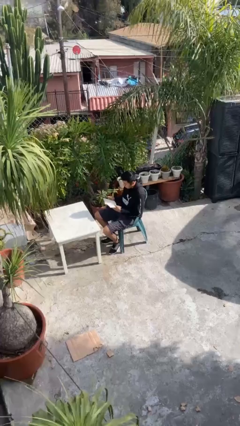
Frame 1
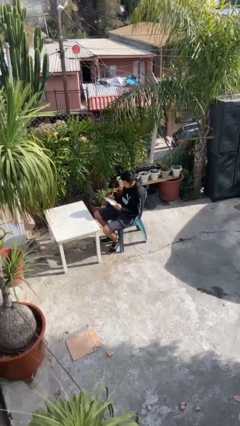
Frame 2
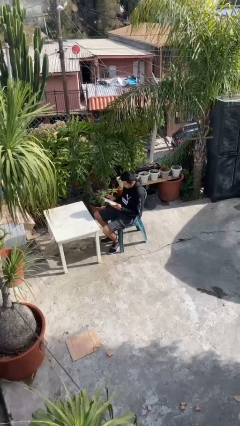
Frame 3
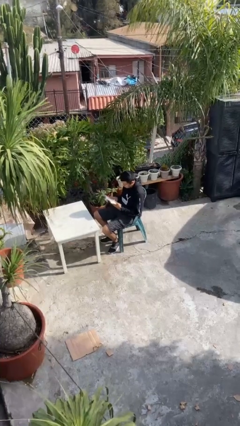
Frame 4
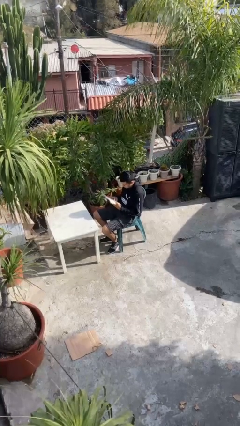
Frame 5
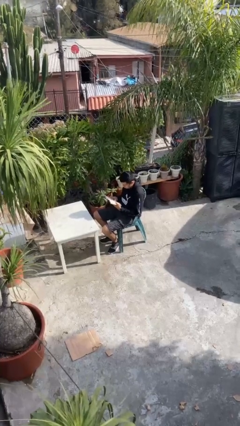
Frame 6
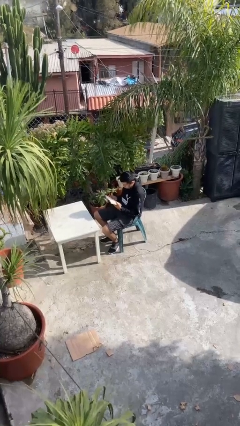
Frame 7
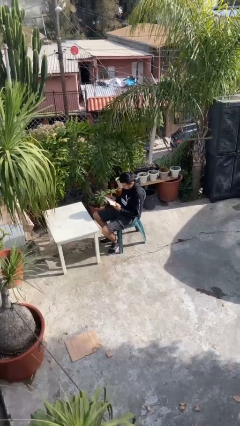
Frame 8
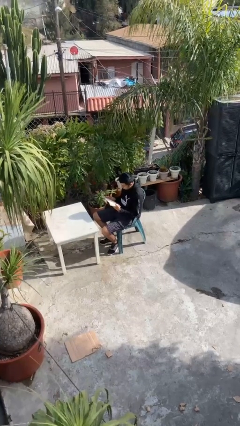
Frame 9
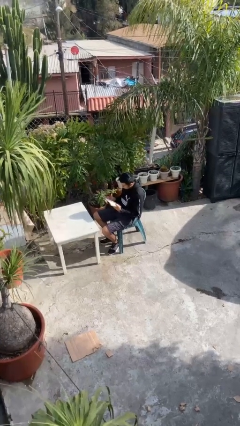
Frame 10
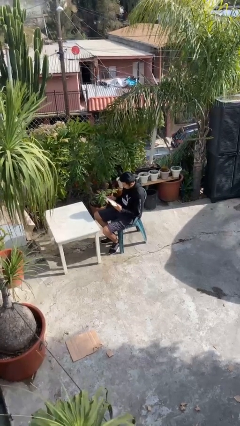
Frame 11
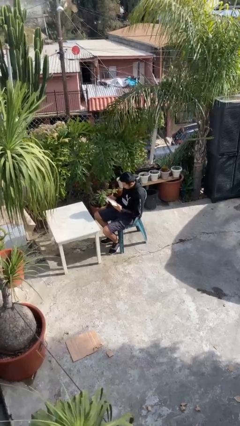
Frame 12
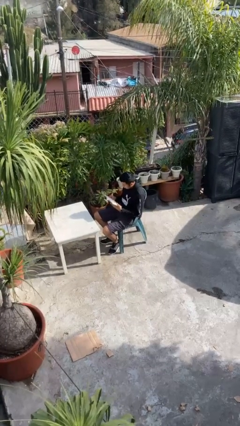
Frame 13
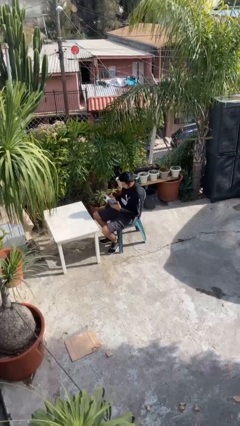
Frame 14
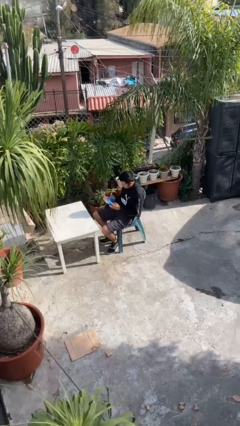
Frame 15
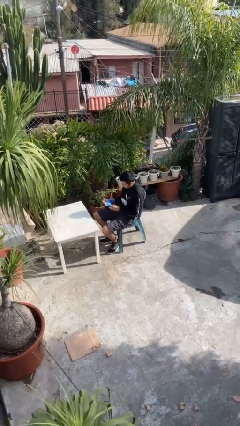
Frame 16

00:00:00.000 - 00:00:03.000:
person reads document

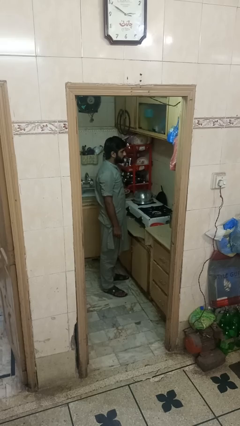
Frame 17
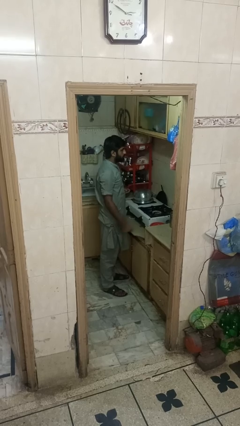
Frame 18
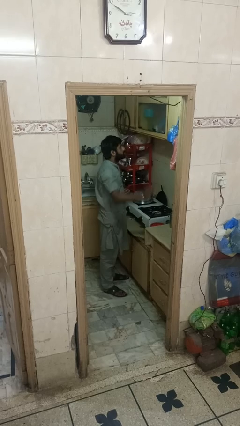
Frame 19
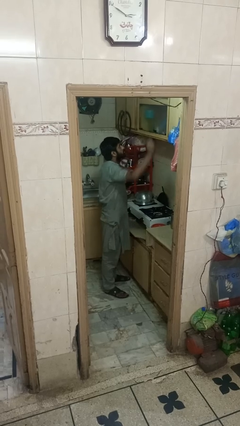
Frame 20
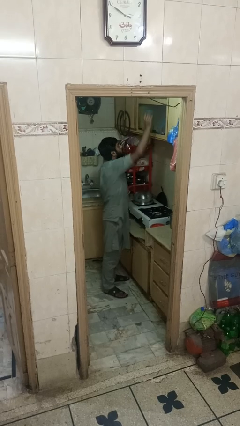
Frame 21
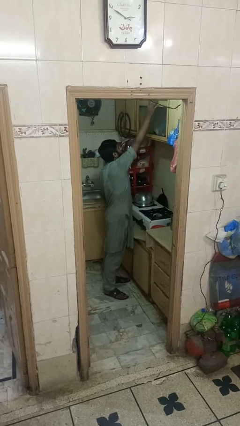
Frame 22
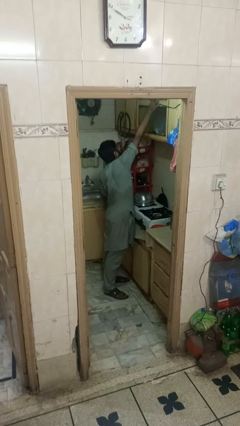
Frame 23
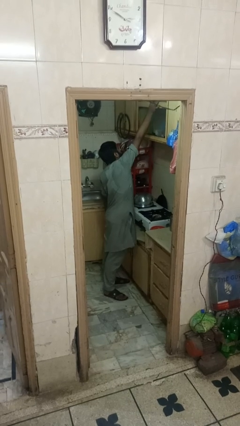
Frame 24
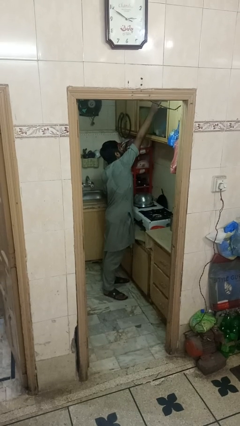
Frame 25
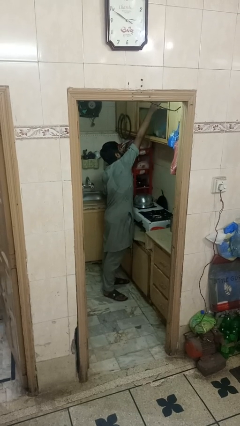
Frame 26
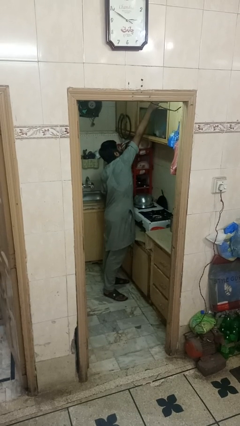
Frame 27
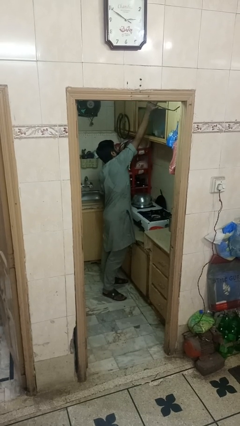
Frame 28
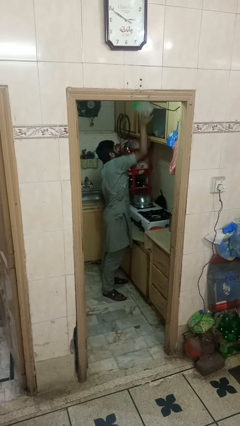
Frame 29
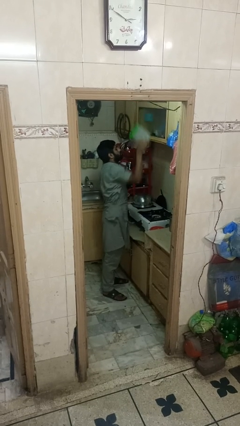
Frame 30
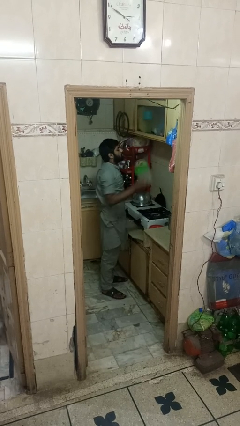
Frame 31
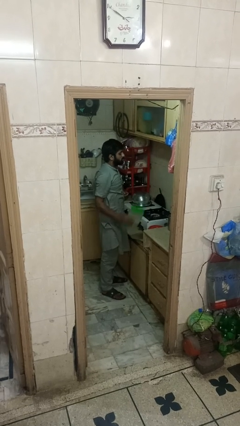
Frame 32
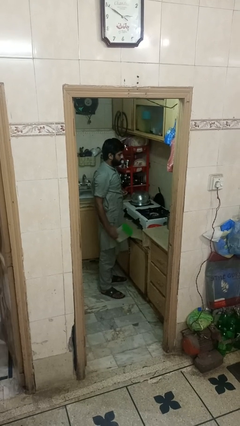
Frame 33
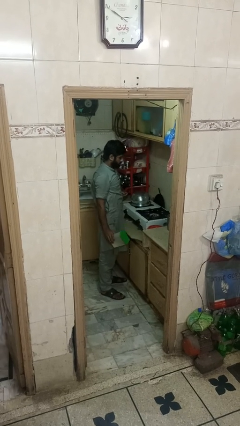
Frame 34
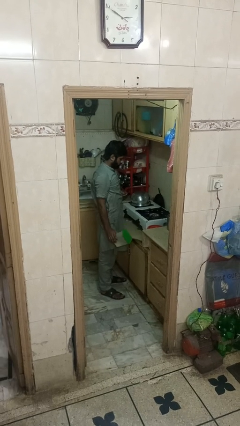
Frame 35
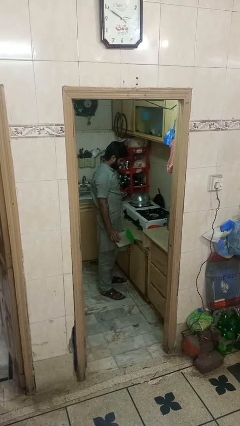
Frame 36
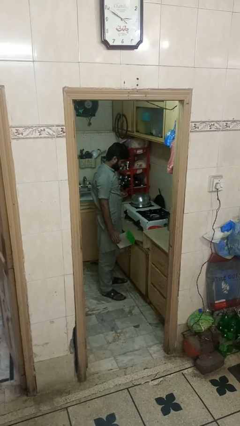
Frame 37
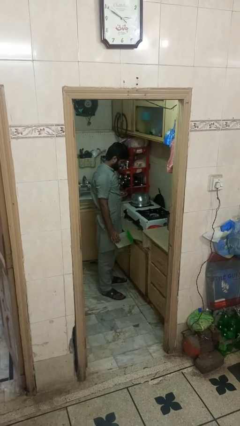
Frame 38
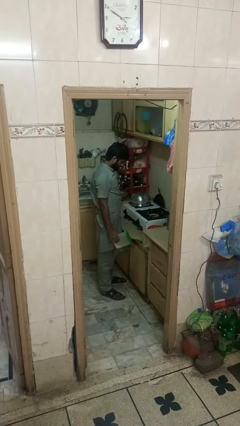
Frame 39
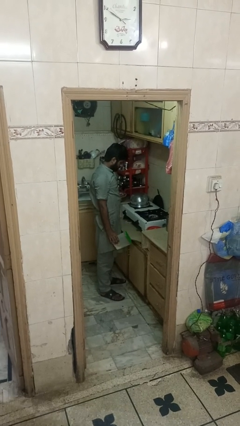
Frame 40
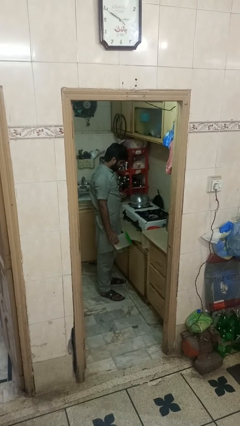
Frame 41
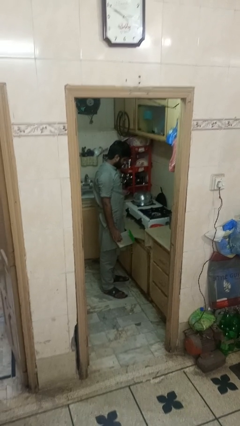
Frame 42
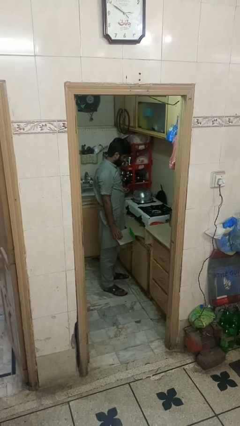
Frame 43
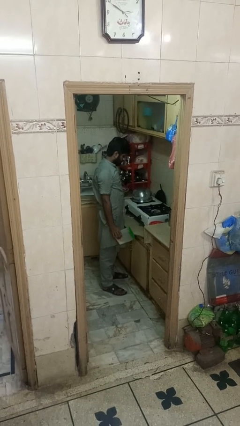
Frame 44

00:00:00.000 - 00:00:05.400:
person picks up object from shelf

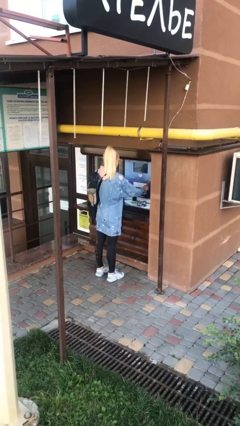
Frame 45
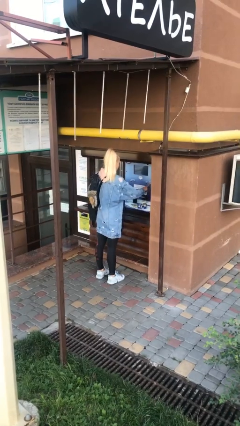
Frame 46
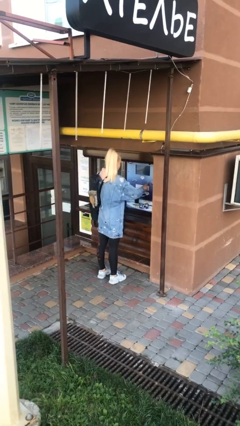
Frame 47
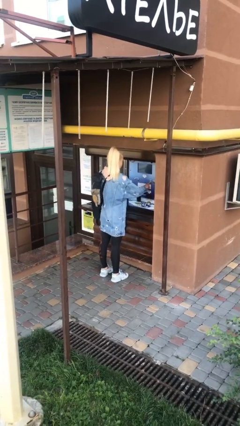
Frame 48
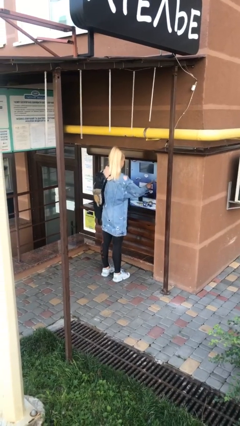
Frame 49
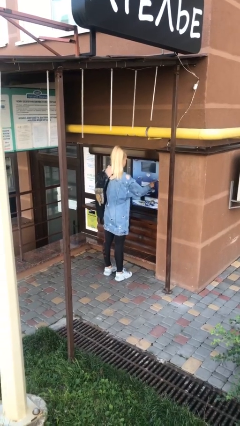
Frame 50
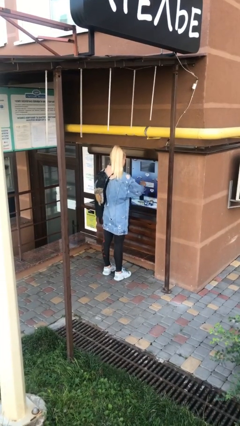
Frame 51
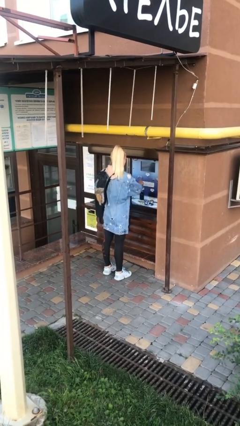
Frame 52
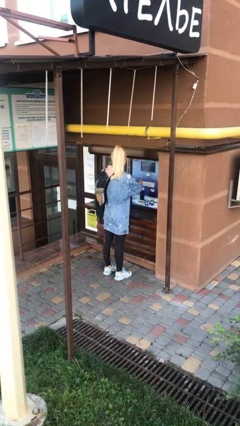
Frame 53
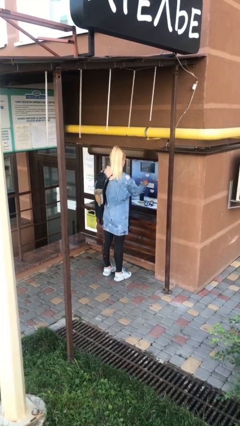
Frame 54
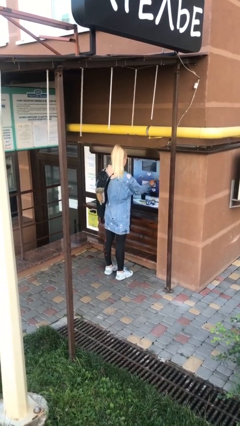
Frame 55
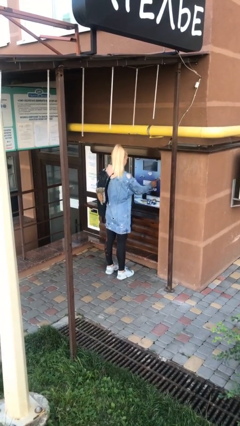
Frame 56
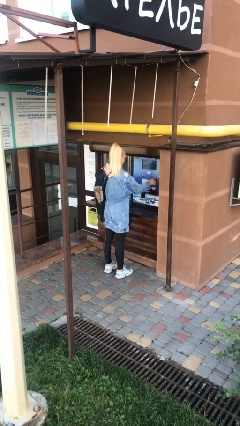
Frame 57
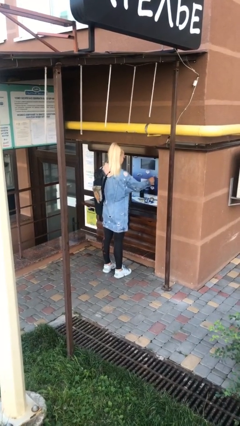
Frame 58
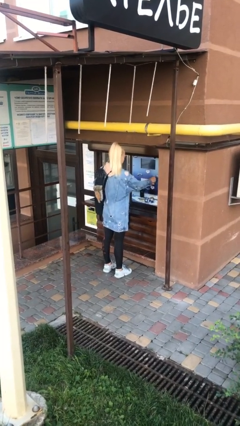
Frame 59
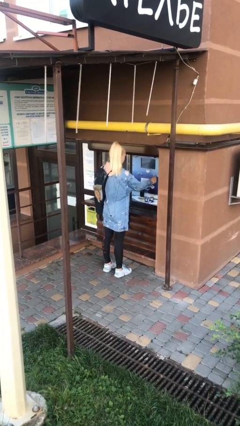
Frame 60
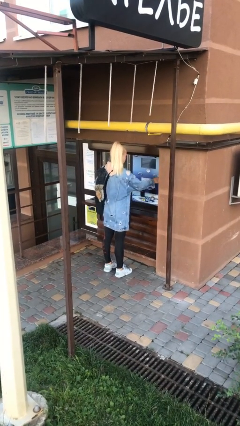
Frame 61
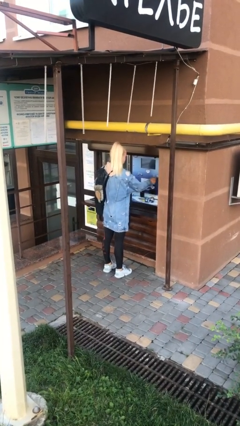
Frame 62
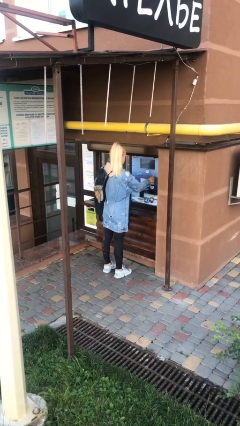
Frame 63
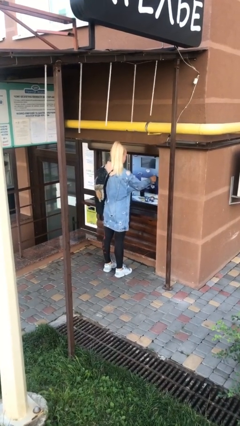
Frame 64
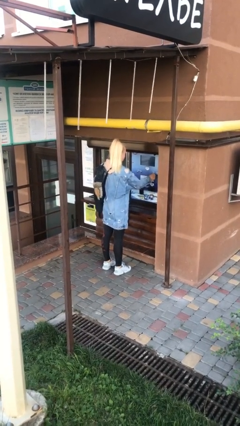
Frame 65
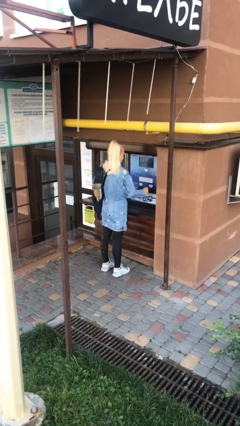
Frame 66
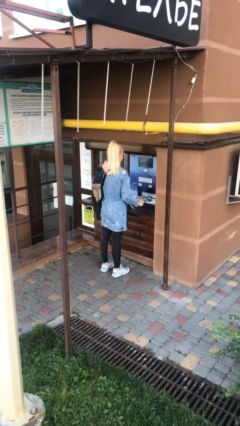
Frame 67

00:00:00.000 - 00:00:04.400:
person purchases from machine

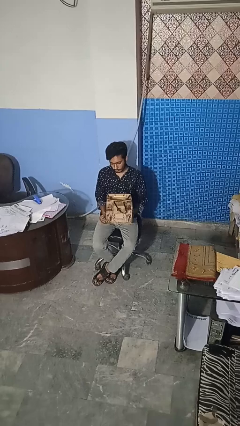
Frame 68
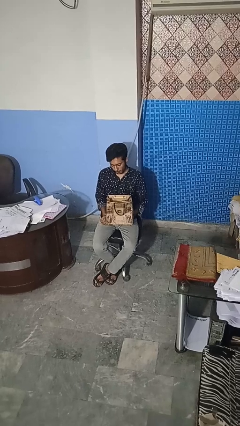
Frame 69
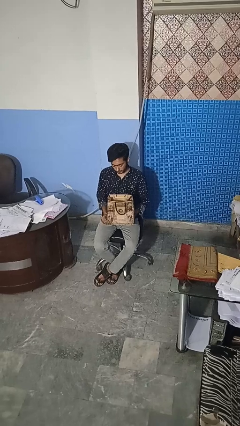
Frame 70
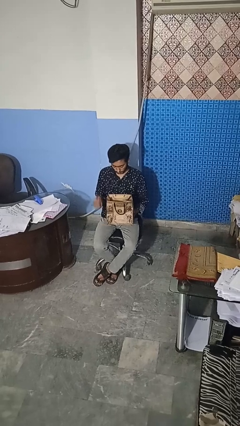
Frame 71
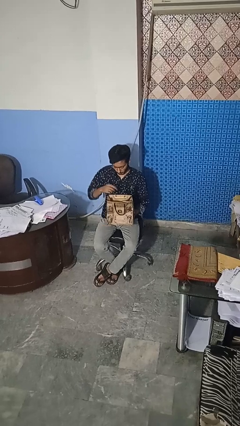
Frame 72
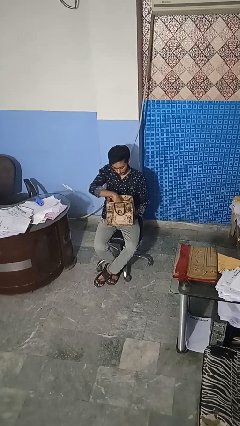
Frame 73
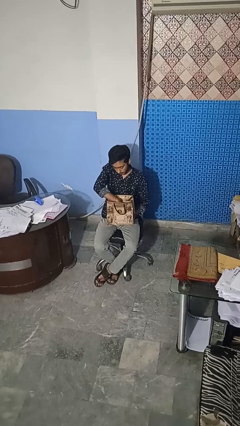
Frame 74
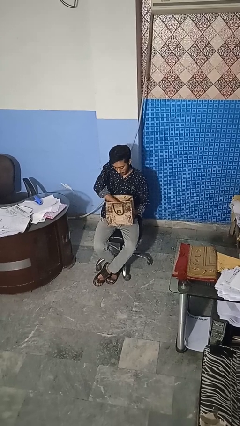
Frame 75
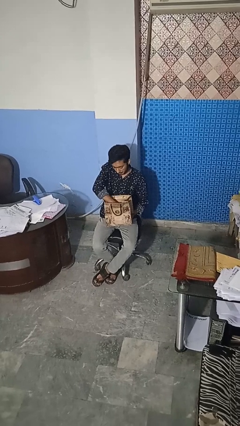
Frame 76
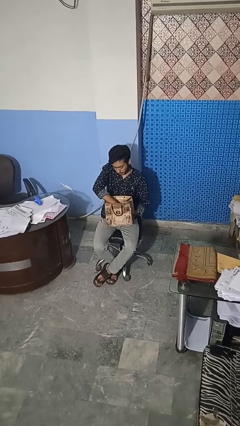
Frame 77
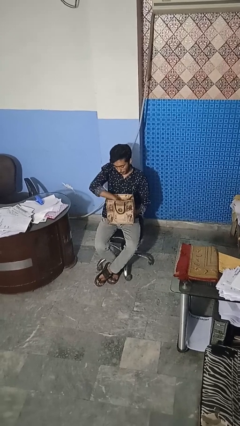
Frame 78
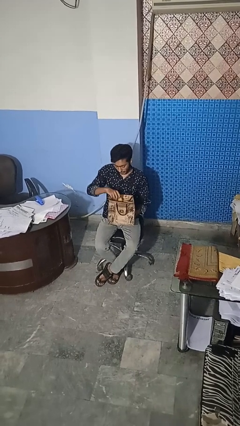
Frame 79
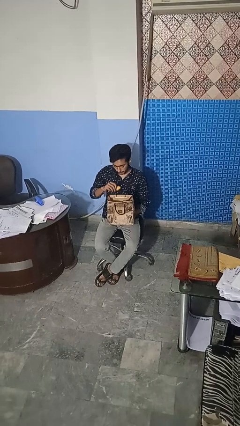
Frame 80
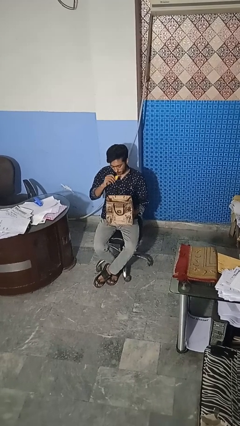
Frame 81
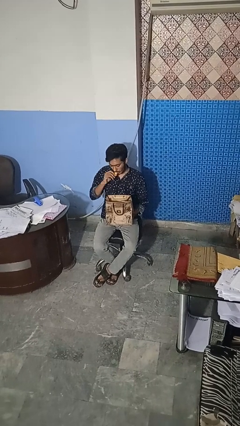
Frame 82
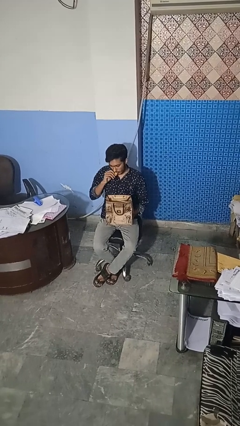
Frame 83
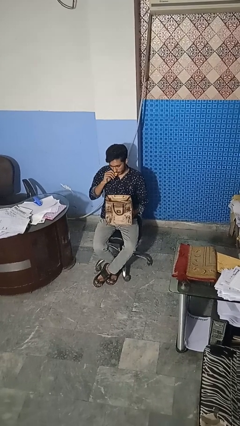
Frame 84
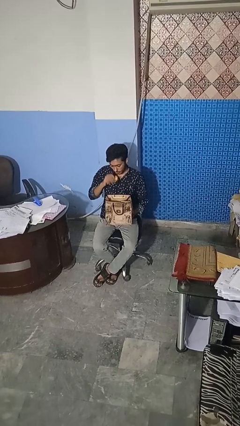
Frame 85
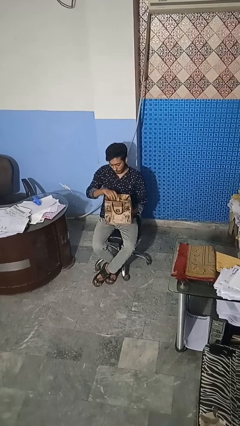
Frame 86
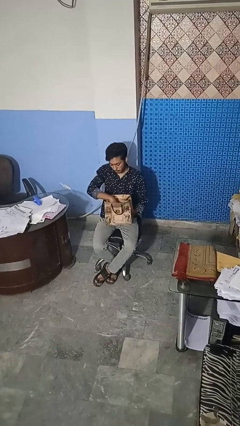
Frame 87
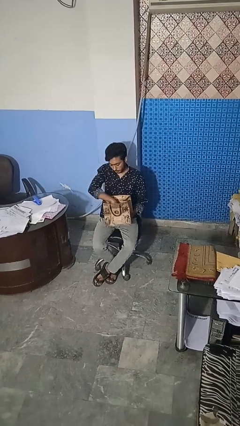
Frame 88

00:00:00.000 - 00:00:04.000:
person eats snack from bag

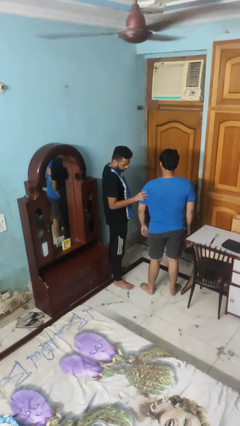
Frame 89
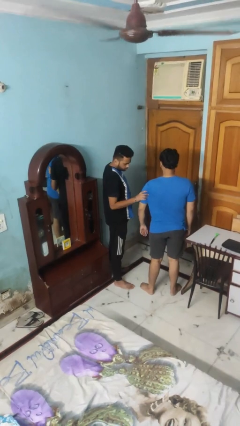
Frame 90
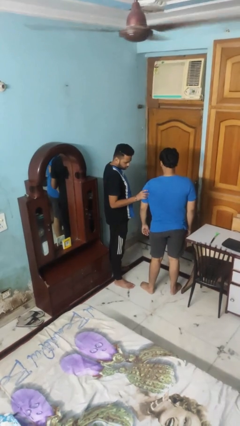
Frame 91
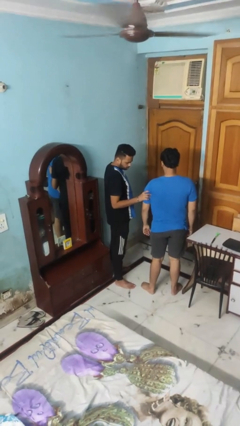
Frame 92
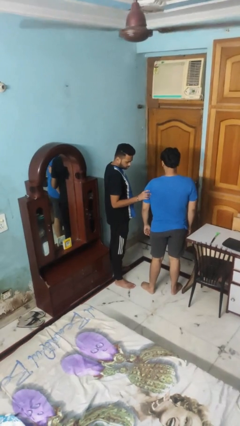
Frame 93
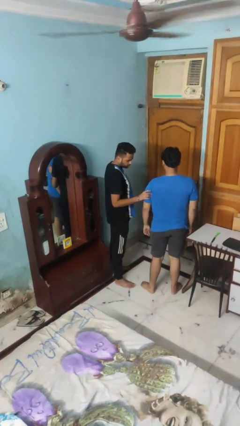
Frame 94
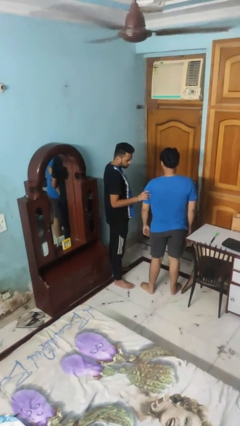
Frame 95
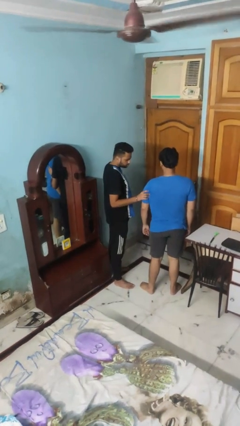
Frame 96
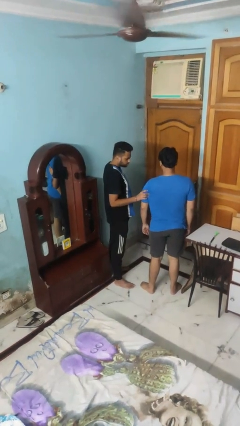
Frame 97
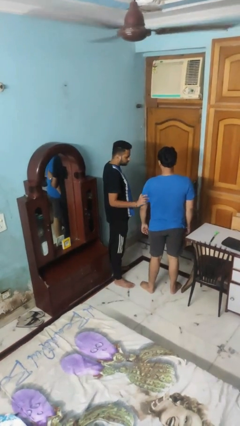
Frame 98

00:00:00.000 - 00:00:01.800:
person grabs person by bicep
